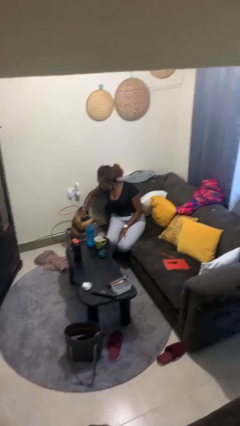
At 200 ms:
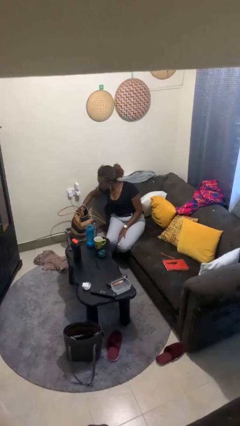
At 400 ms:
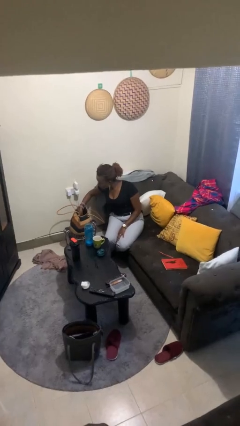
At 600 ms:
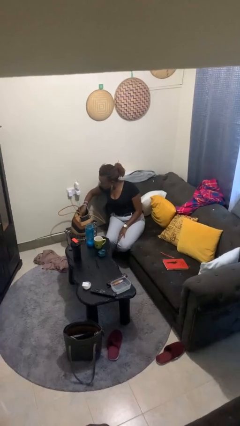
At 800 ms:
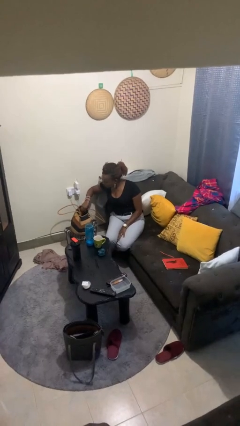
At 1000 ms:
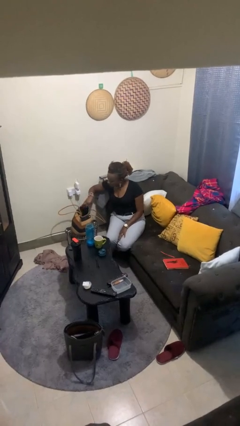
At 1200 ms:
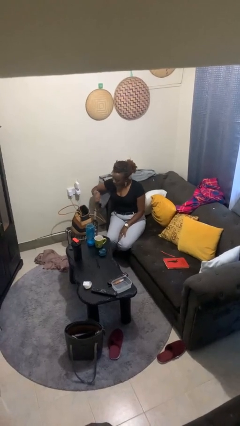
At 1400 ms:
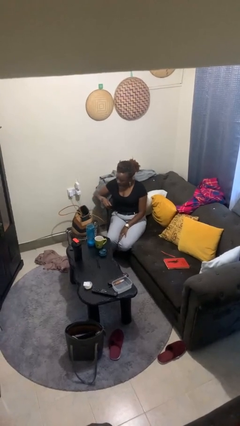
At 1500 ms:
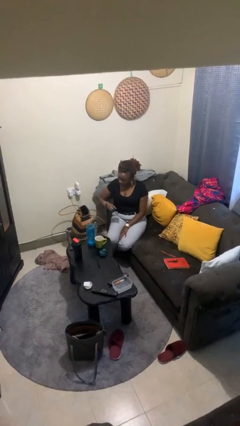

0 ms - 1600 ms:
person takes object from purse

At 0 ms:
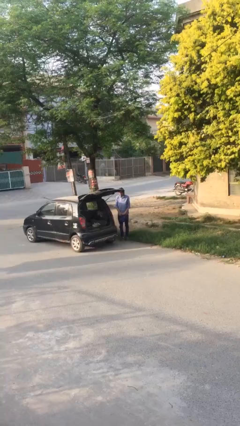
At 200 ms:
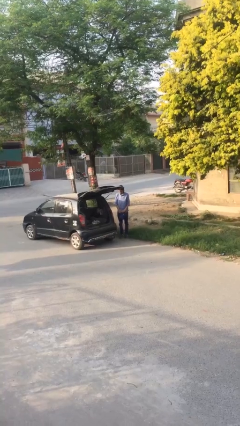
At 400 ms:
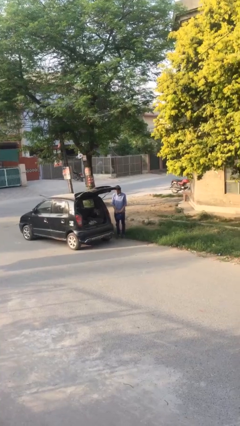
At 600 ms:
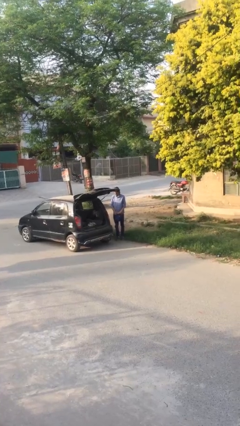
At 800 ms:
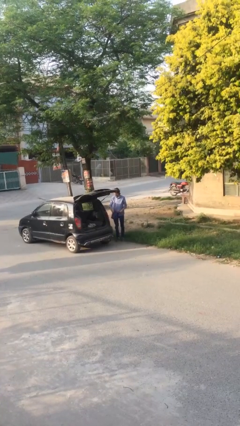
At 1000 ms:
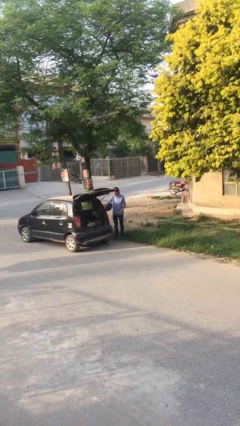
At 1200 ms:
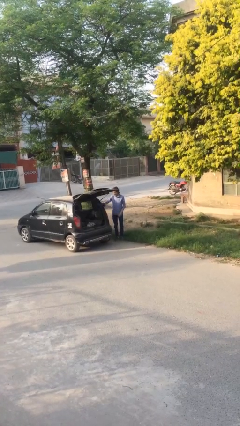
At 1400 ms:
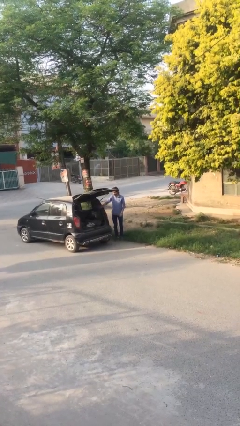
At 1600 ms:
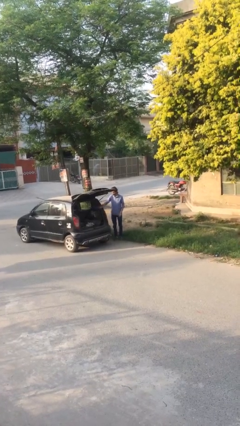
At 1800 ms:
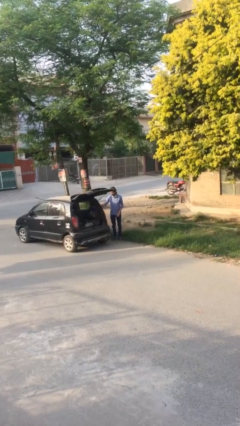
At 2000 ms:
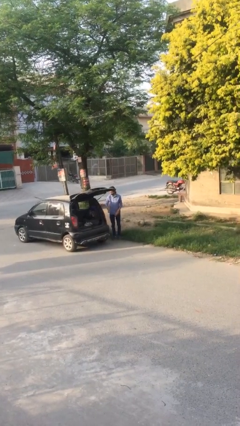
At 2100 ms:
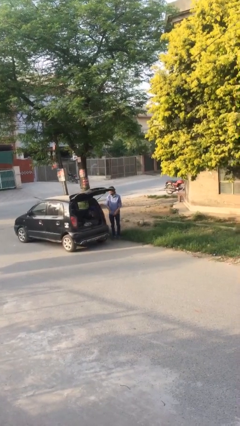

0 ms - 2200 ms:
person loads car

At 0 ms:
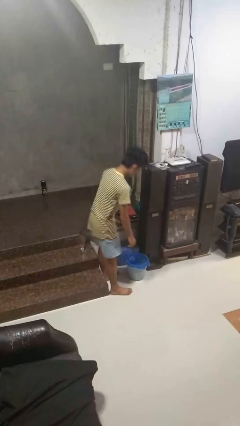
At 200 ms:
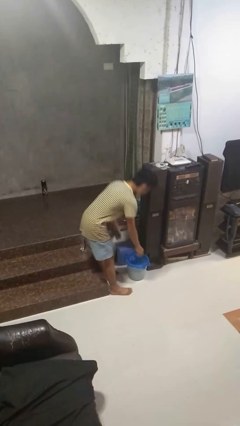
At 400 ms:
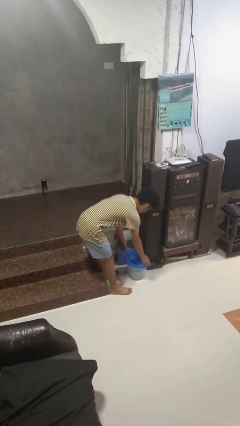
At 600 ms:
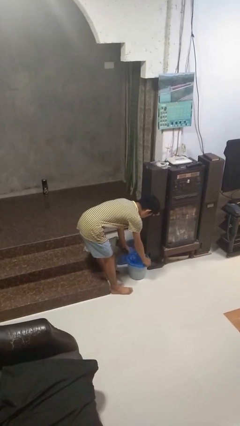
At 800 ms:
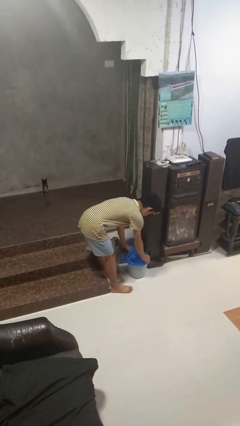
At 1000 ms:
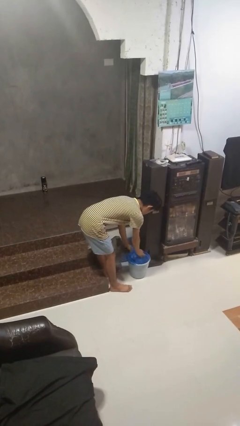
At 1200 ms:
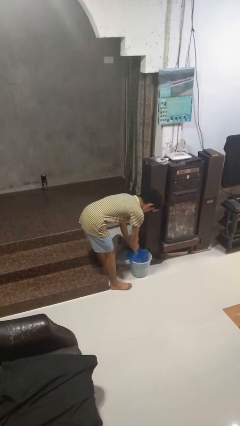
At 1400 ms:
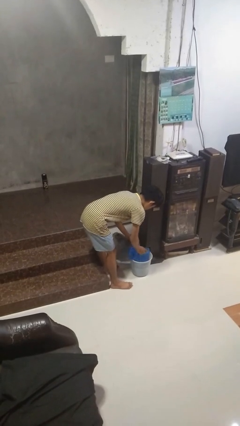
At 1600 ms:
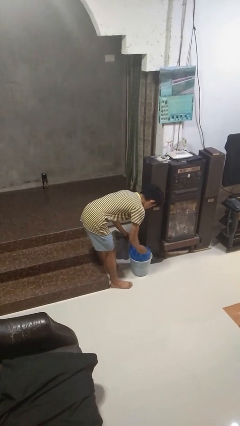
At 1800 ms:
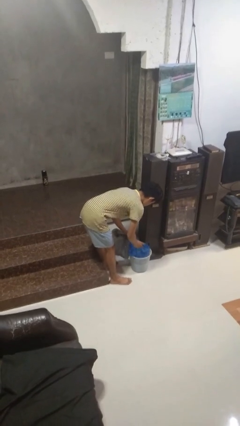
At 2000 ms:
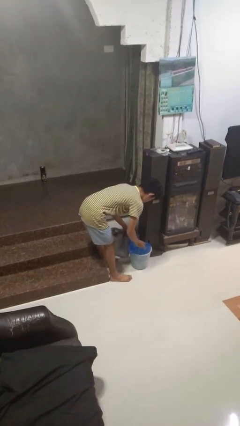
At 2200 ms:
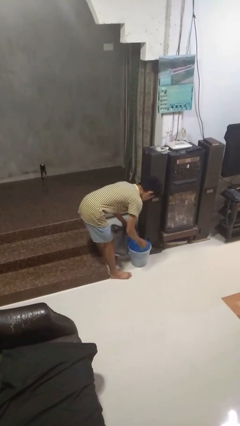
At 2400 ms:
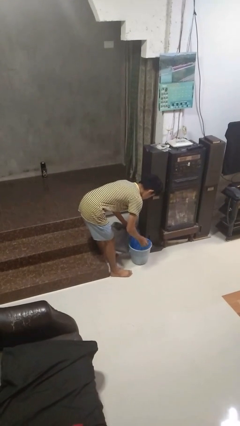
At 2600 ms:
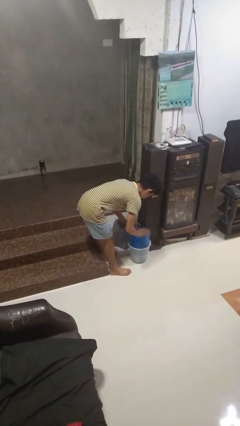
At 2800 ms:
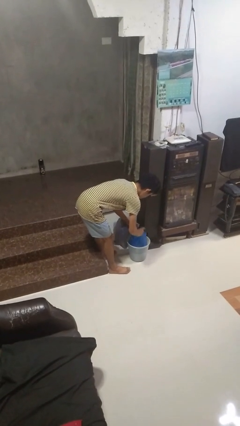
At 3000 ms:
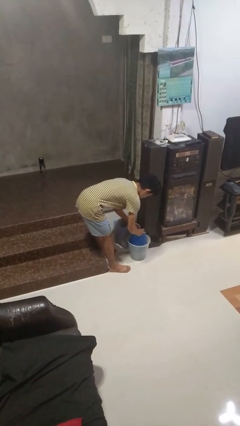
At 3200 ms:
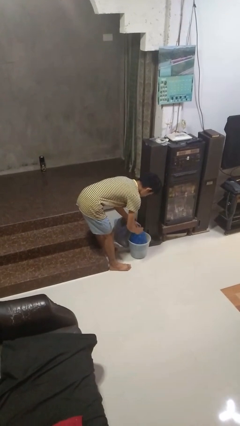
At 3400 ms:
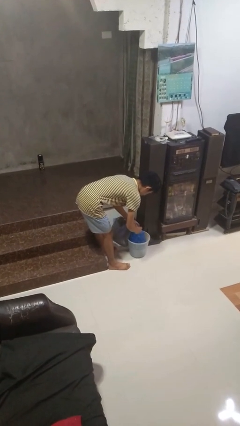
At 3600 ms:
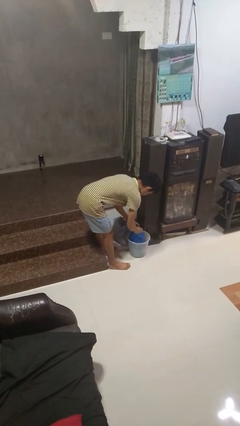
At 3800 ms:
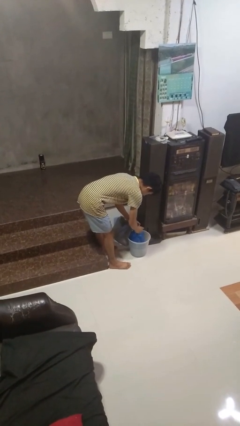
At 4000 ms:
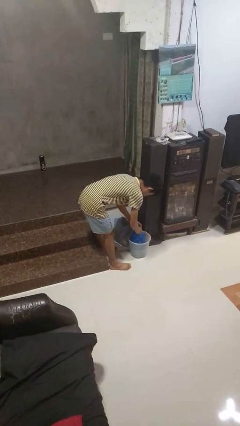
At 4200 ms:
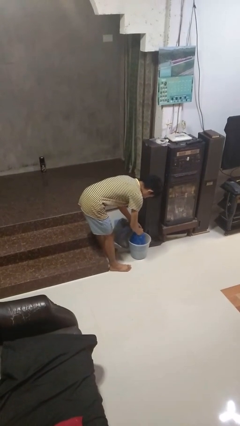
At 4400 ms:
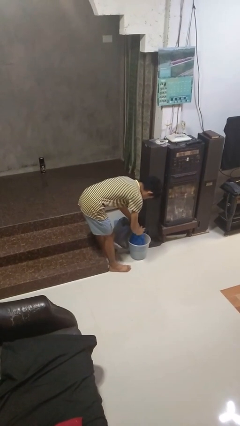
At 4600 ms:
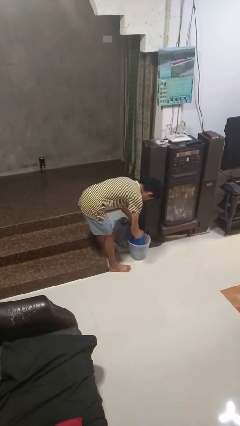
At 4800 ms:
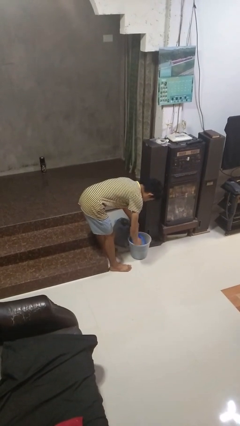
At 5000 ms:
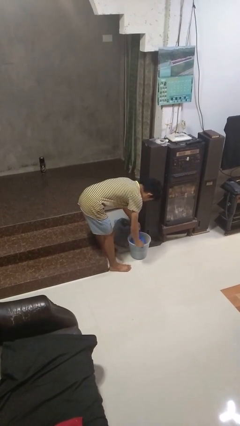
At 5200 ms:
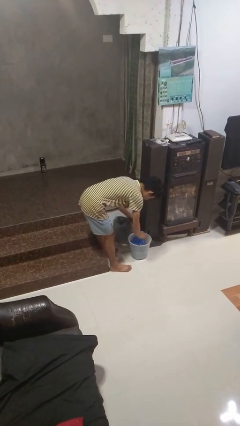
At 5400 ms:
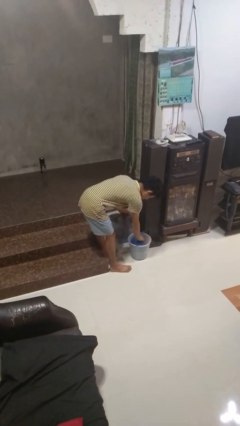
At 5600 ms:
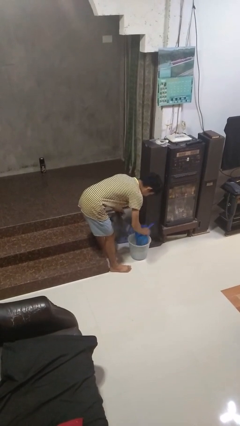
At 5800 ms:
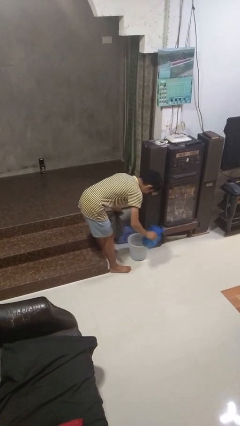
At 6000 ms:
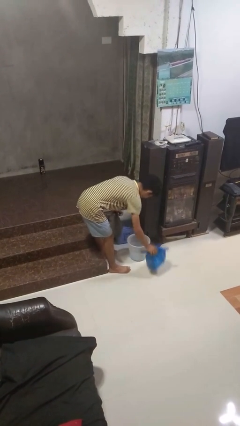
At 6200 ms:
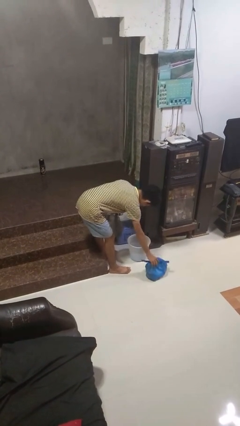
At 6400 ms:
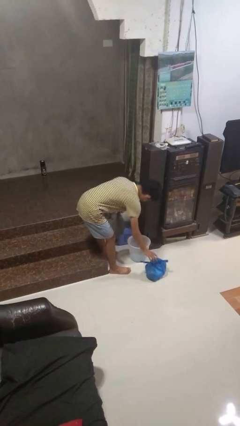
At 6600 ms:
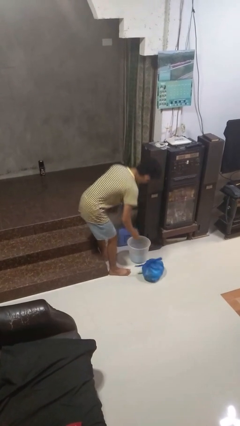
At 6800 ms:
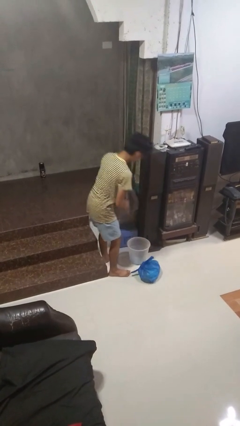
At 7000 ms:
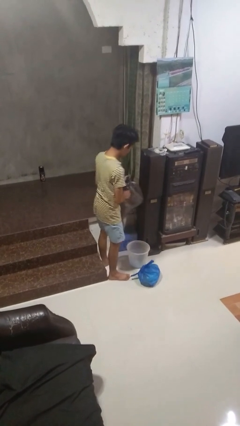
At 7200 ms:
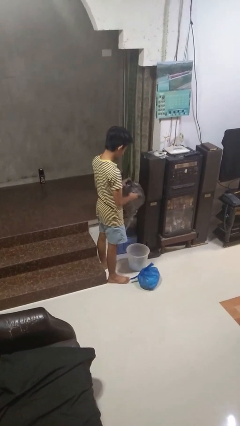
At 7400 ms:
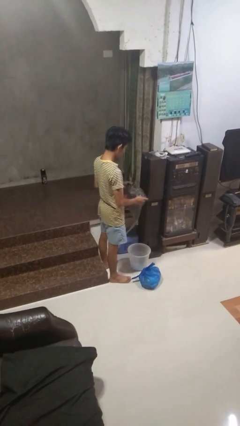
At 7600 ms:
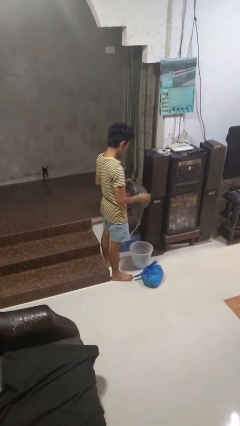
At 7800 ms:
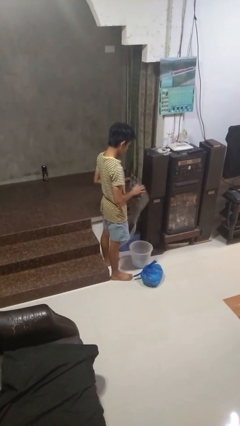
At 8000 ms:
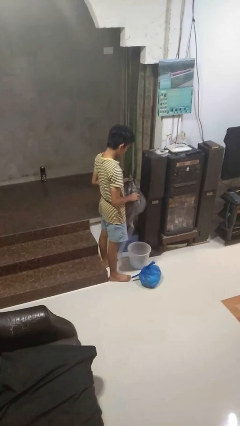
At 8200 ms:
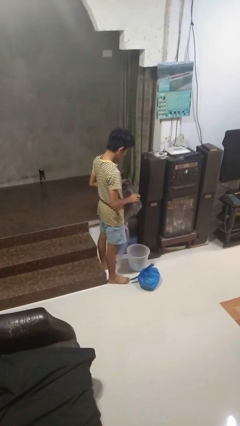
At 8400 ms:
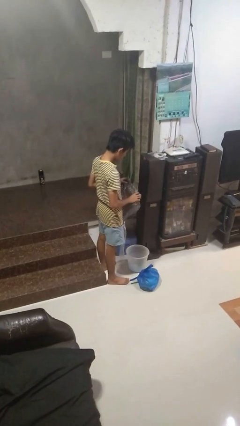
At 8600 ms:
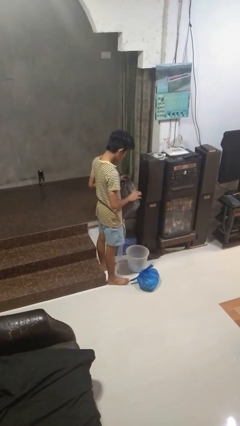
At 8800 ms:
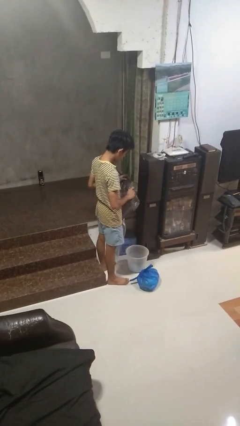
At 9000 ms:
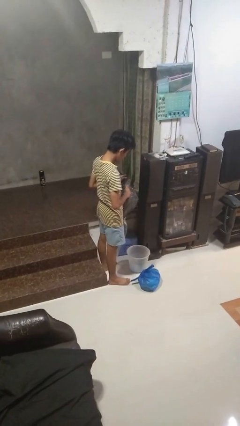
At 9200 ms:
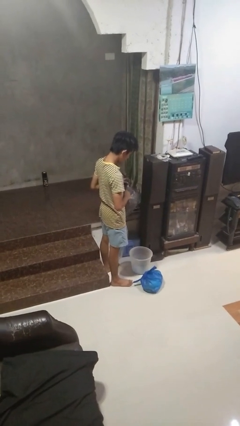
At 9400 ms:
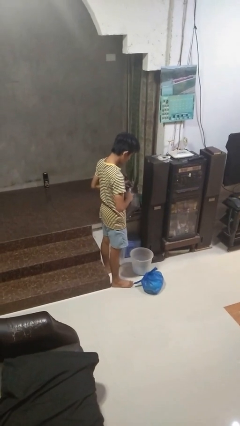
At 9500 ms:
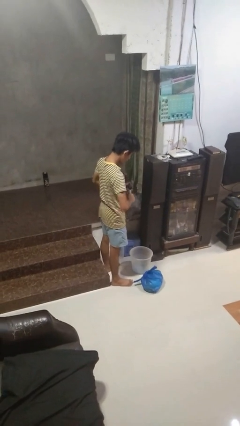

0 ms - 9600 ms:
person removes trashbag from trashcan

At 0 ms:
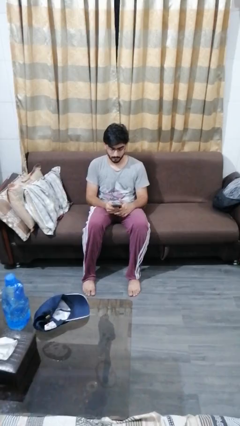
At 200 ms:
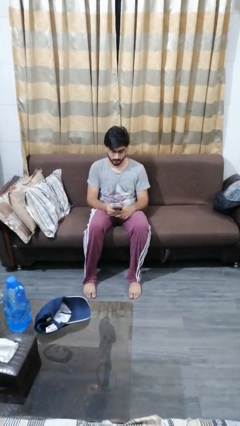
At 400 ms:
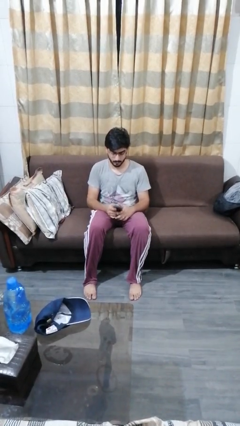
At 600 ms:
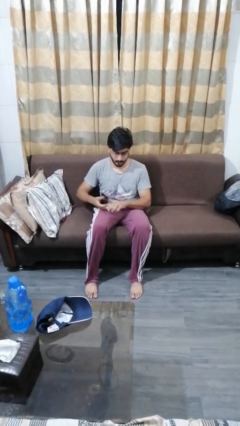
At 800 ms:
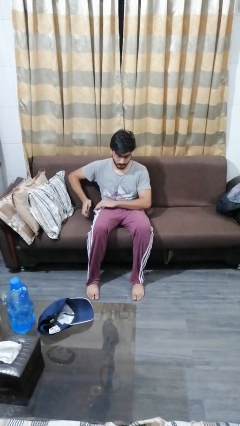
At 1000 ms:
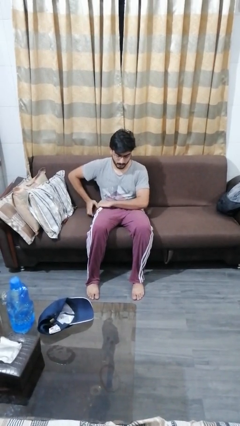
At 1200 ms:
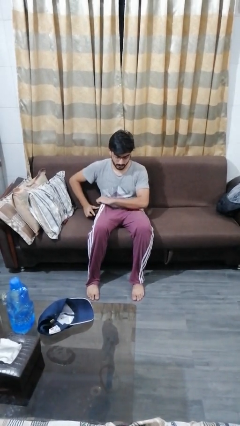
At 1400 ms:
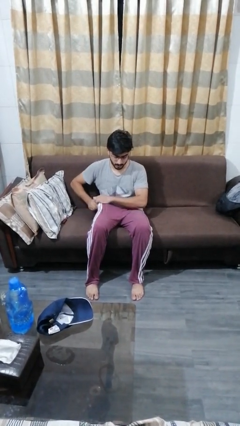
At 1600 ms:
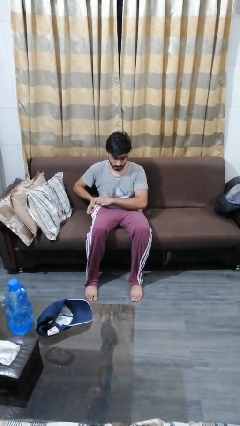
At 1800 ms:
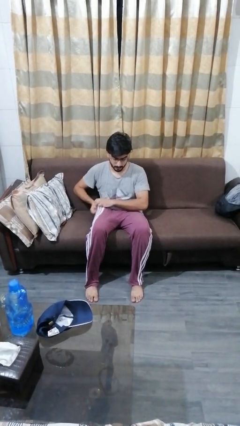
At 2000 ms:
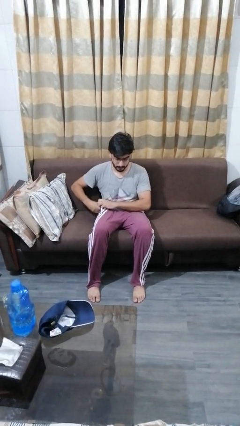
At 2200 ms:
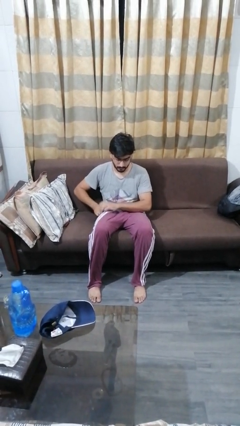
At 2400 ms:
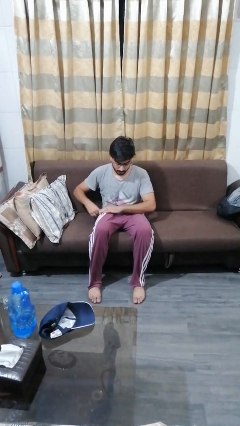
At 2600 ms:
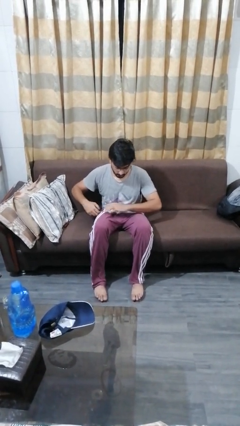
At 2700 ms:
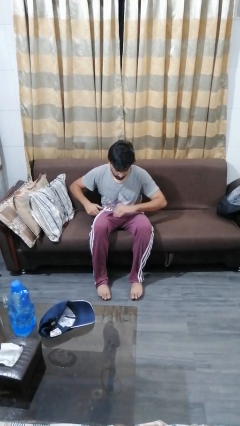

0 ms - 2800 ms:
person puts phone into pocket

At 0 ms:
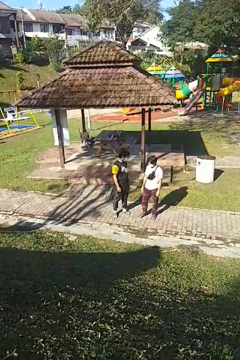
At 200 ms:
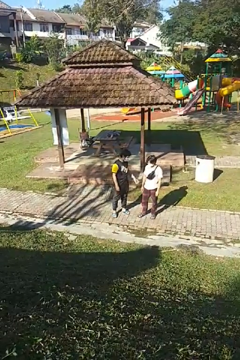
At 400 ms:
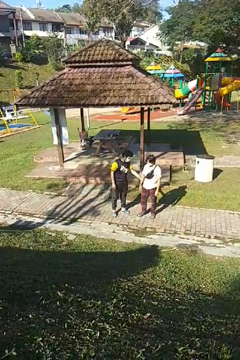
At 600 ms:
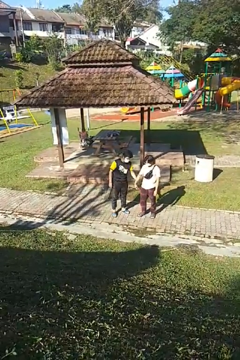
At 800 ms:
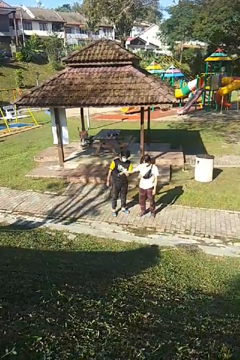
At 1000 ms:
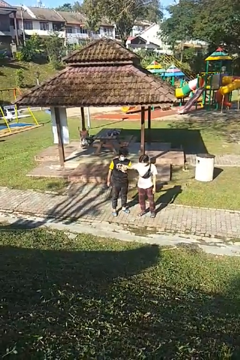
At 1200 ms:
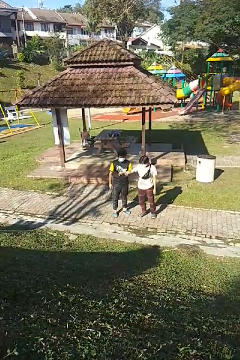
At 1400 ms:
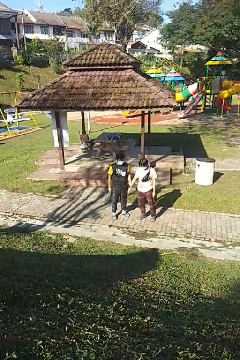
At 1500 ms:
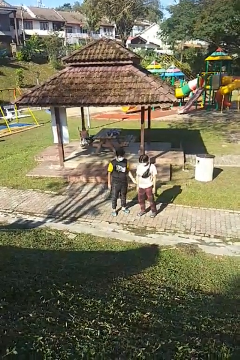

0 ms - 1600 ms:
person grabs person by forearm
